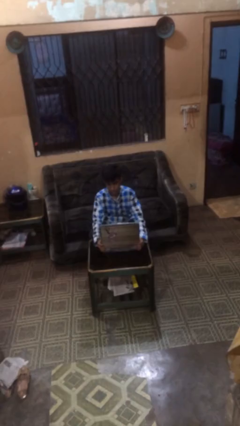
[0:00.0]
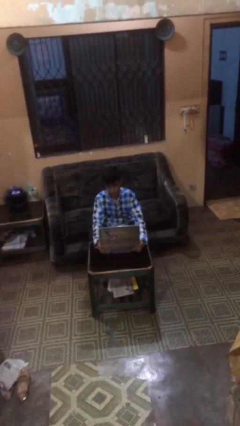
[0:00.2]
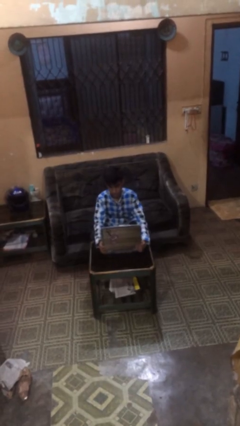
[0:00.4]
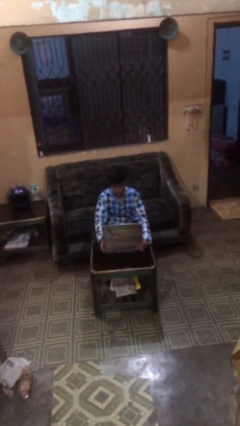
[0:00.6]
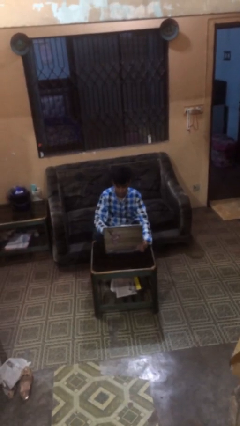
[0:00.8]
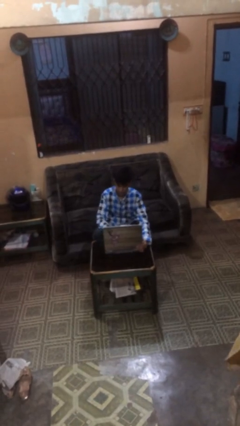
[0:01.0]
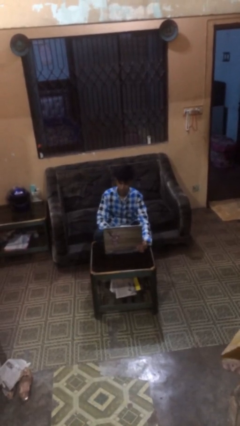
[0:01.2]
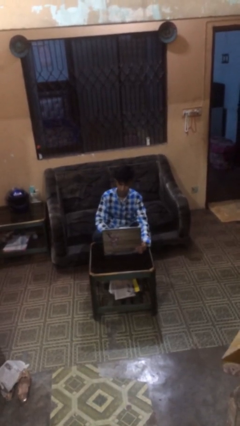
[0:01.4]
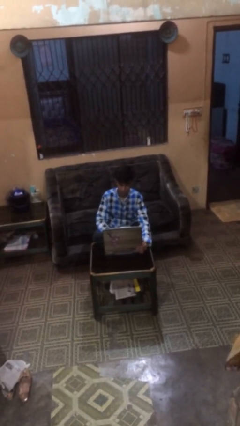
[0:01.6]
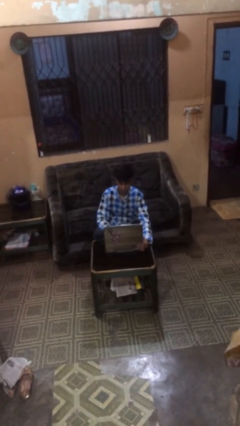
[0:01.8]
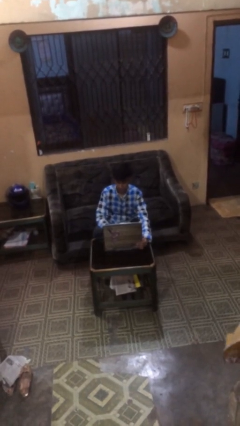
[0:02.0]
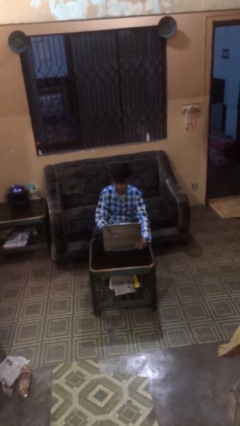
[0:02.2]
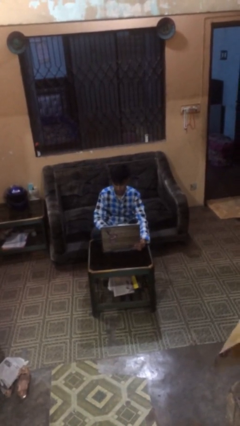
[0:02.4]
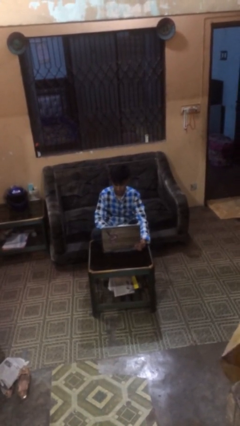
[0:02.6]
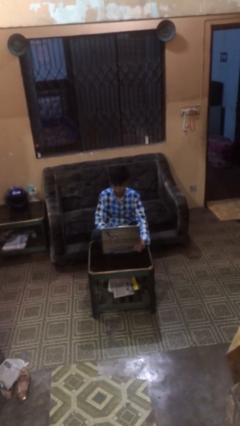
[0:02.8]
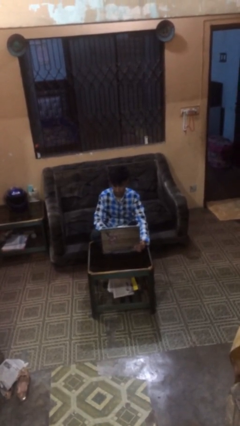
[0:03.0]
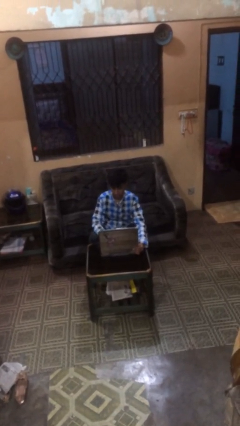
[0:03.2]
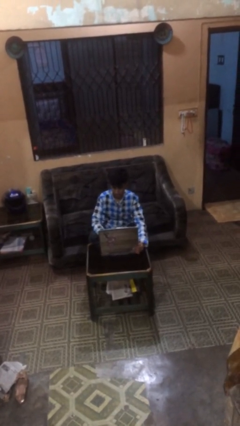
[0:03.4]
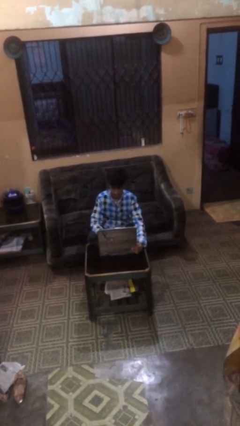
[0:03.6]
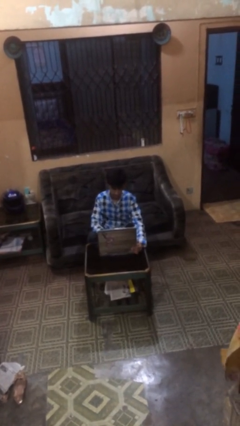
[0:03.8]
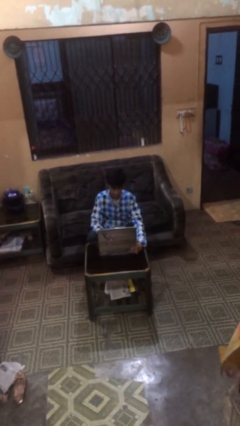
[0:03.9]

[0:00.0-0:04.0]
person interacts with laptop

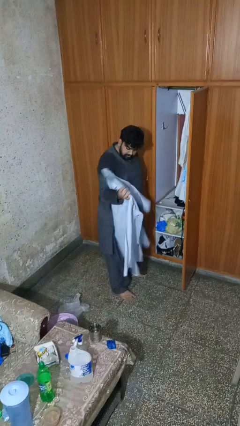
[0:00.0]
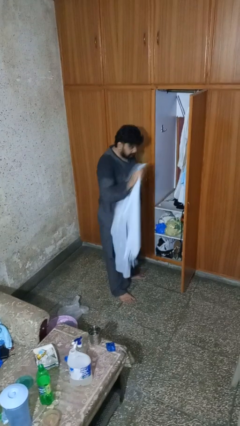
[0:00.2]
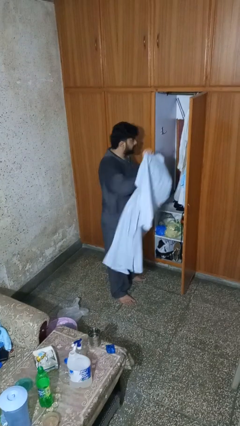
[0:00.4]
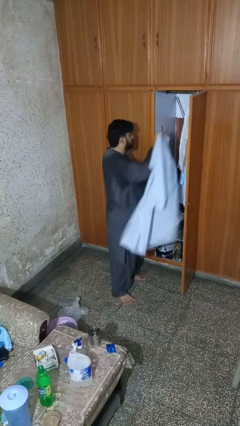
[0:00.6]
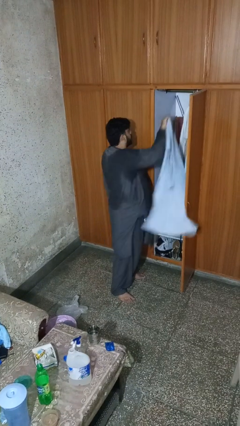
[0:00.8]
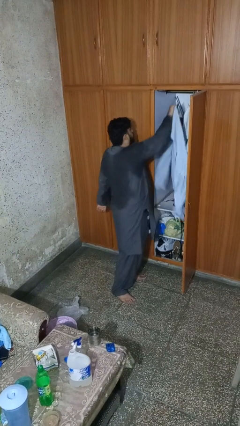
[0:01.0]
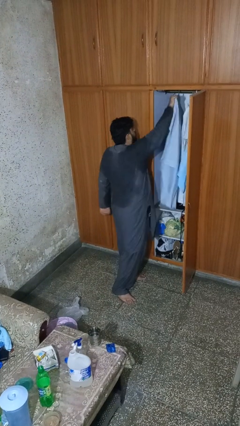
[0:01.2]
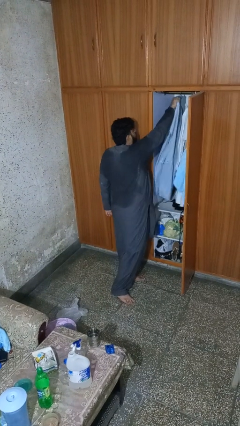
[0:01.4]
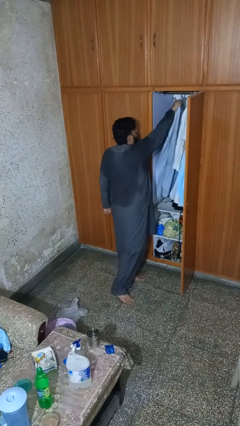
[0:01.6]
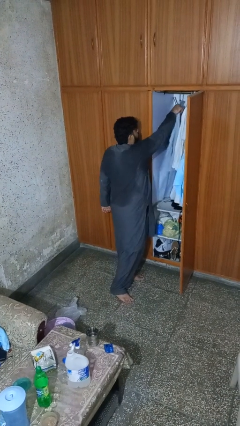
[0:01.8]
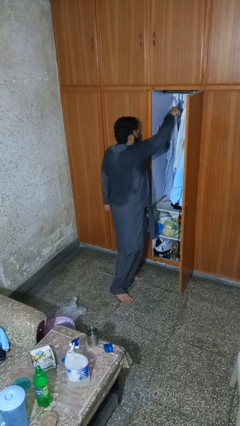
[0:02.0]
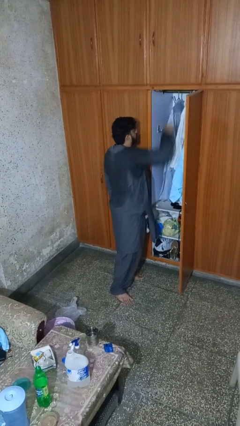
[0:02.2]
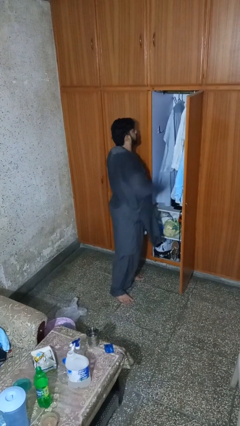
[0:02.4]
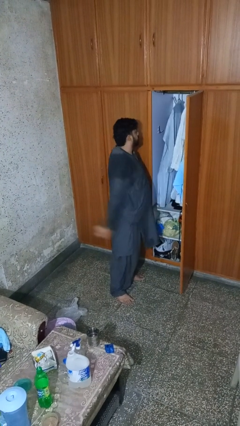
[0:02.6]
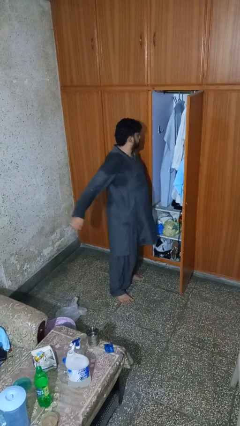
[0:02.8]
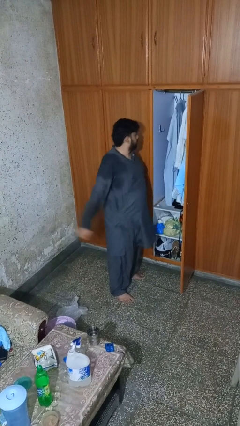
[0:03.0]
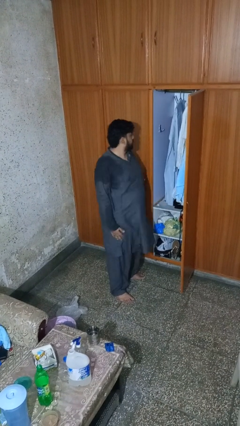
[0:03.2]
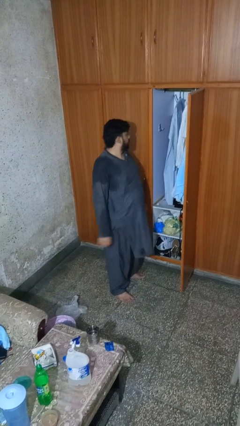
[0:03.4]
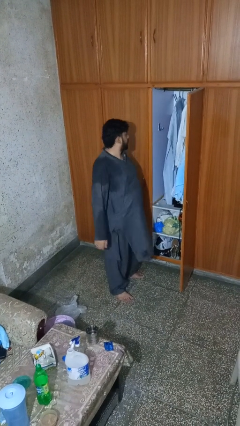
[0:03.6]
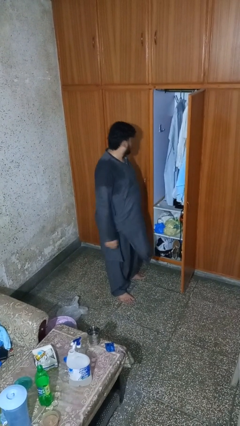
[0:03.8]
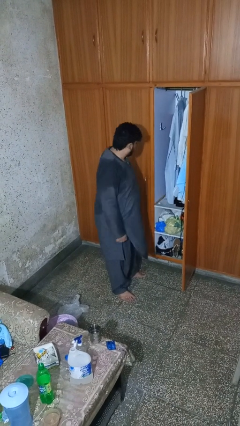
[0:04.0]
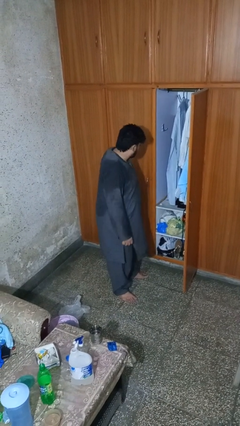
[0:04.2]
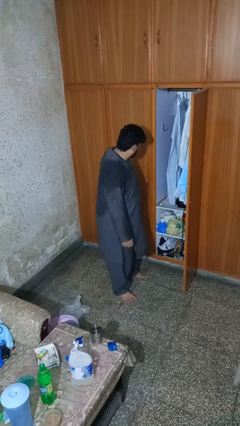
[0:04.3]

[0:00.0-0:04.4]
person puts clothes into closet

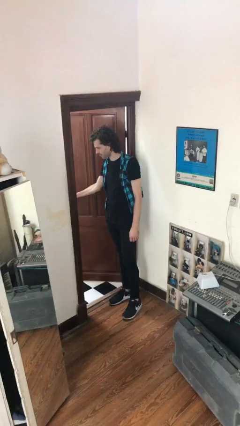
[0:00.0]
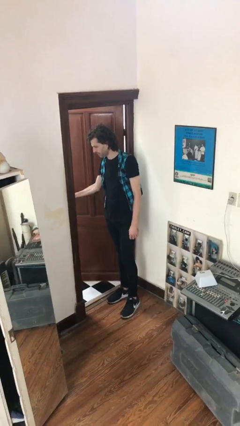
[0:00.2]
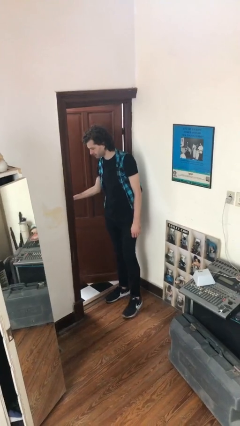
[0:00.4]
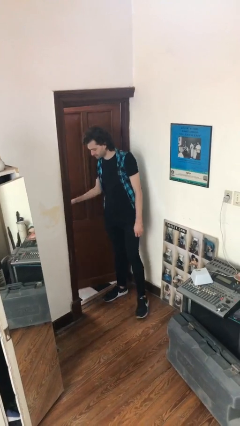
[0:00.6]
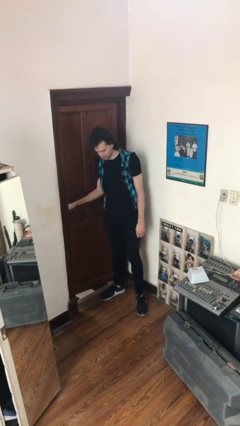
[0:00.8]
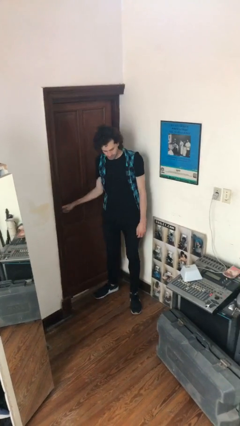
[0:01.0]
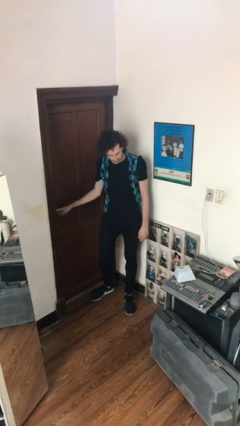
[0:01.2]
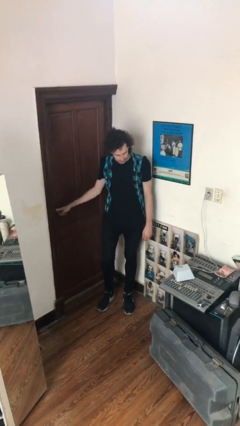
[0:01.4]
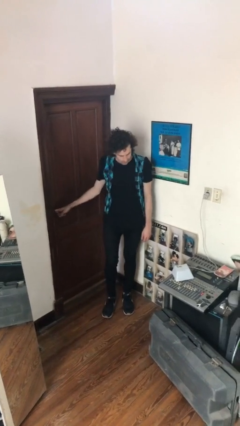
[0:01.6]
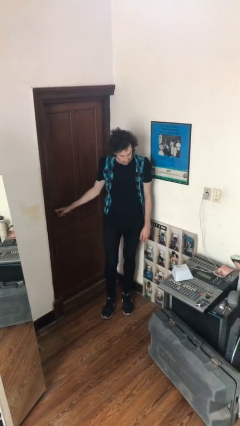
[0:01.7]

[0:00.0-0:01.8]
person closes facility door

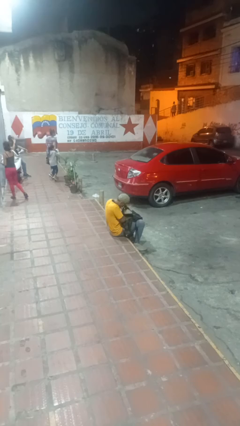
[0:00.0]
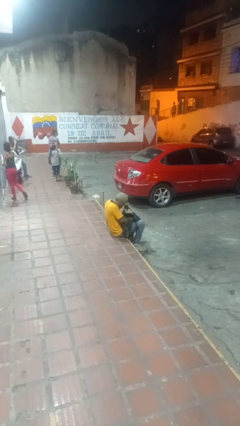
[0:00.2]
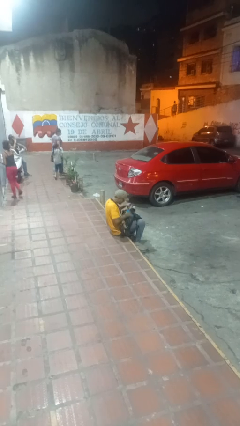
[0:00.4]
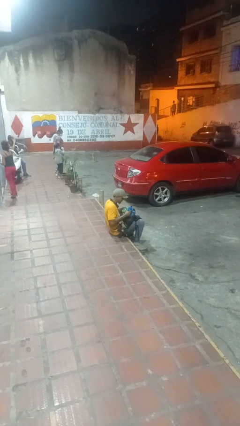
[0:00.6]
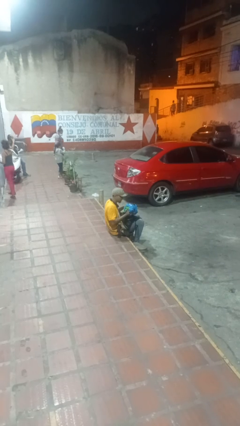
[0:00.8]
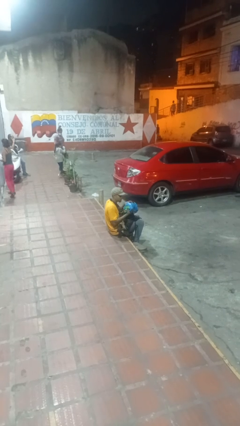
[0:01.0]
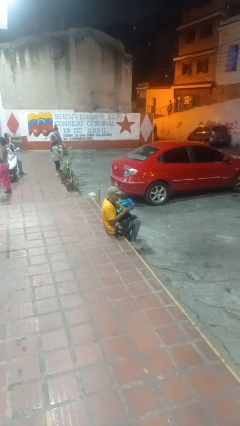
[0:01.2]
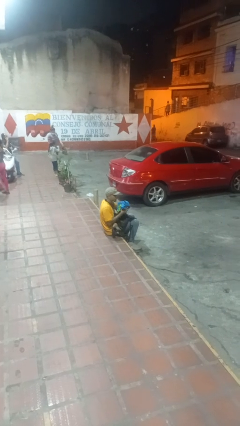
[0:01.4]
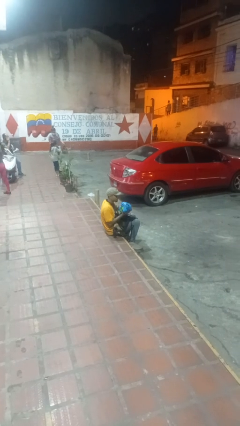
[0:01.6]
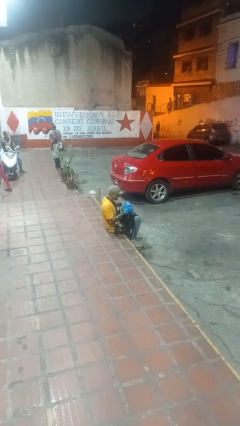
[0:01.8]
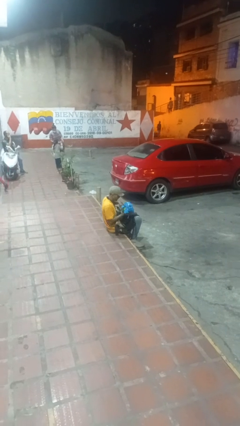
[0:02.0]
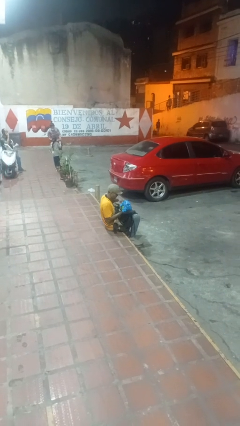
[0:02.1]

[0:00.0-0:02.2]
person takes object from backpack

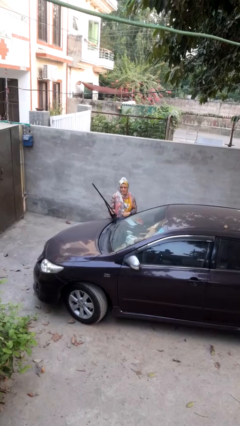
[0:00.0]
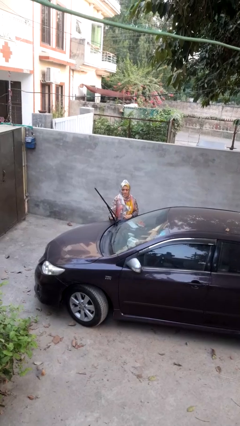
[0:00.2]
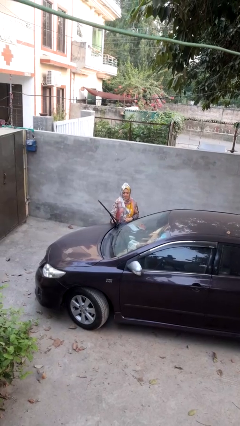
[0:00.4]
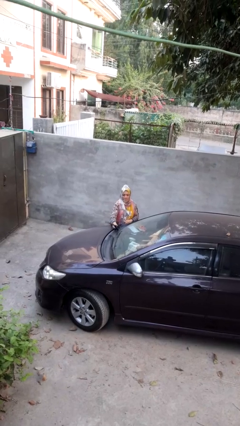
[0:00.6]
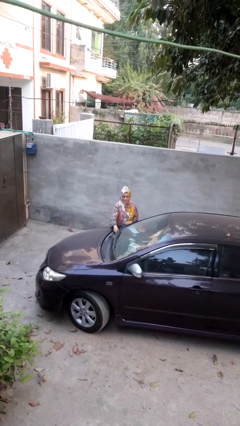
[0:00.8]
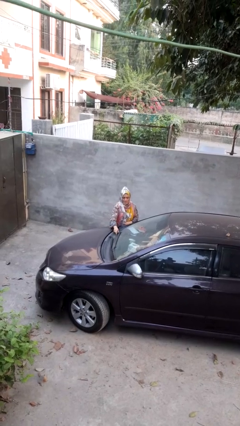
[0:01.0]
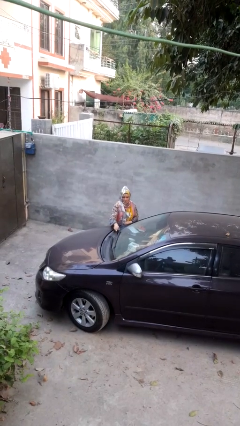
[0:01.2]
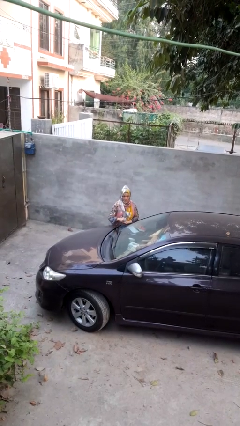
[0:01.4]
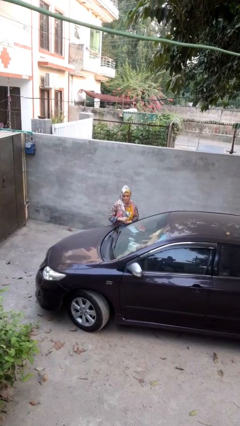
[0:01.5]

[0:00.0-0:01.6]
person flips down car wipers

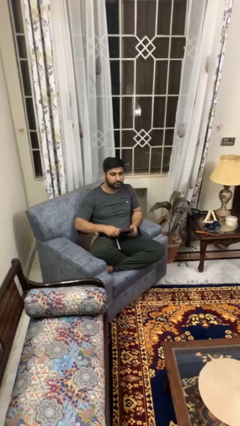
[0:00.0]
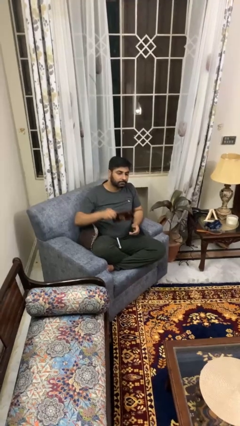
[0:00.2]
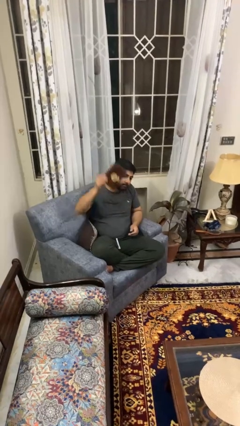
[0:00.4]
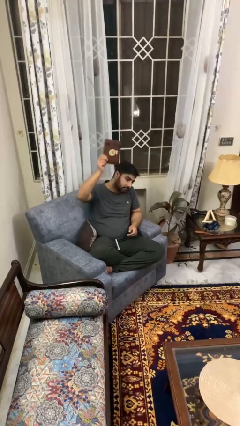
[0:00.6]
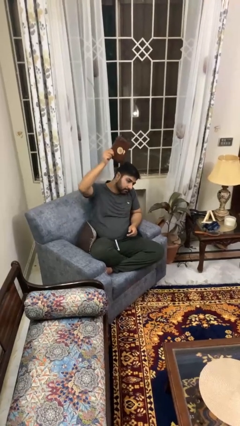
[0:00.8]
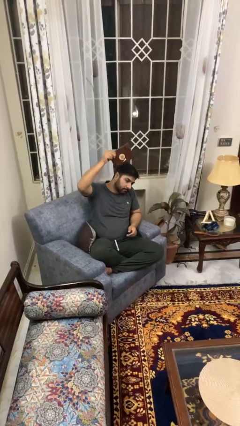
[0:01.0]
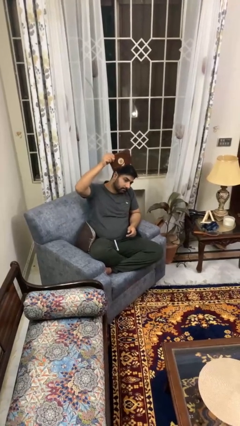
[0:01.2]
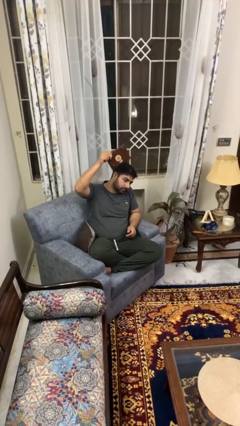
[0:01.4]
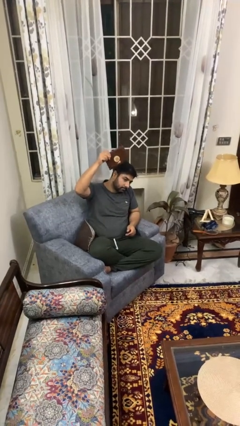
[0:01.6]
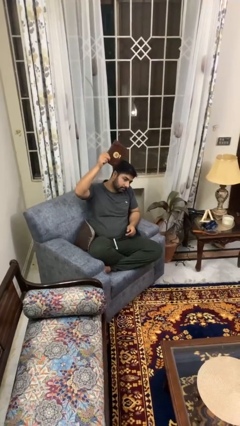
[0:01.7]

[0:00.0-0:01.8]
person holds object above head

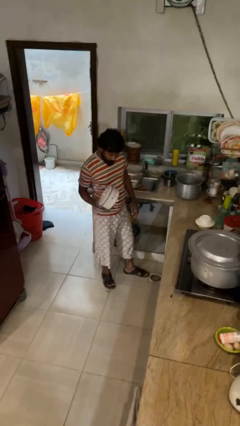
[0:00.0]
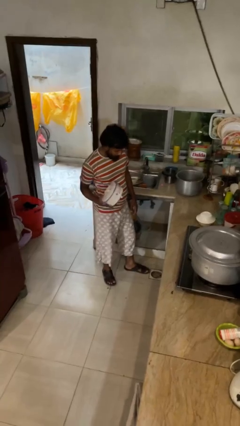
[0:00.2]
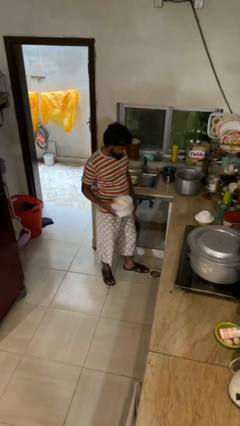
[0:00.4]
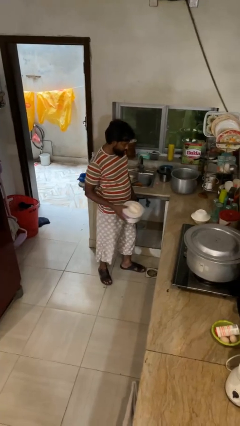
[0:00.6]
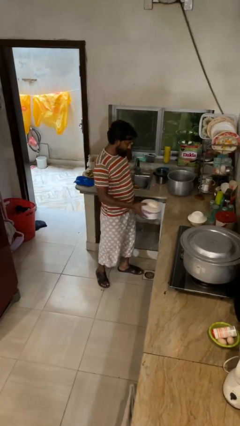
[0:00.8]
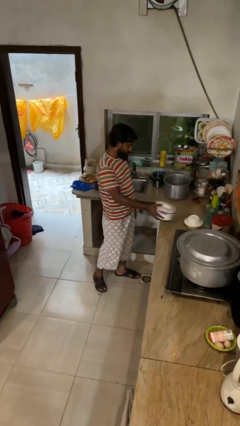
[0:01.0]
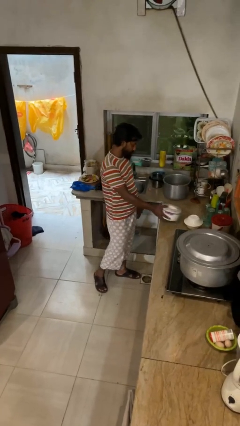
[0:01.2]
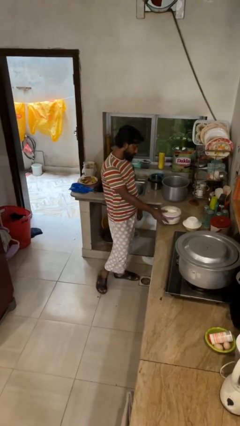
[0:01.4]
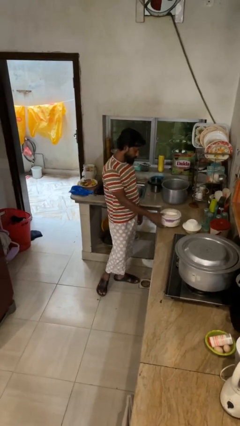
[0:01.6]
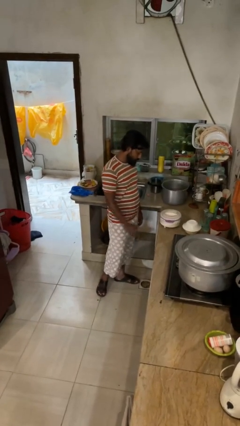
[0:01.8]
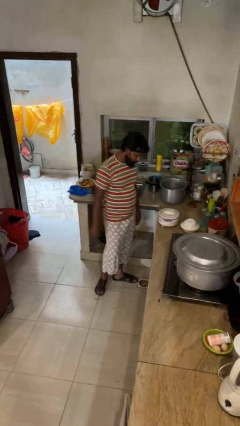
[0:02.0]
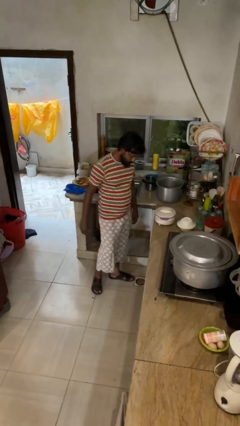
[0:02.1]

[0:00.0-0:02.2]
person puts down object on countertop
